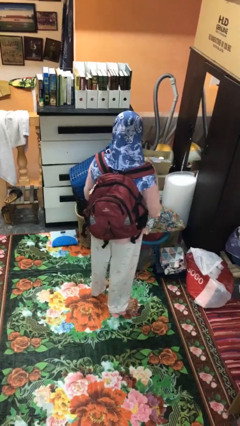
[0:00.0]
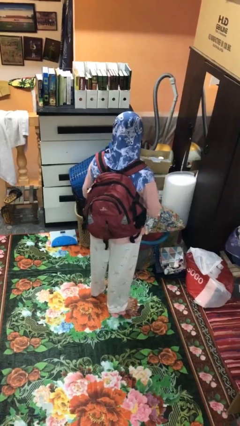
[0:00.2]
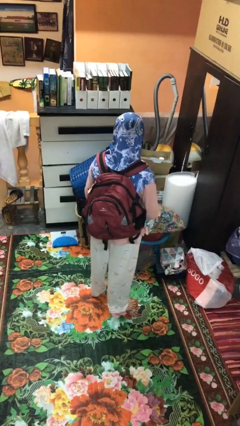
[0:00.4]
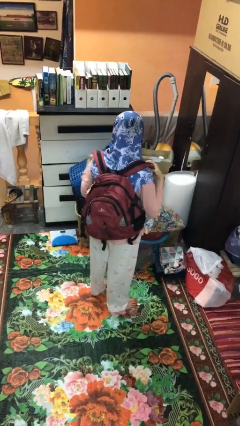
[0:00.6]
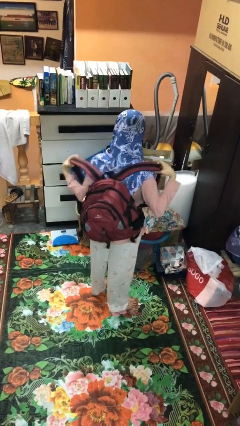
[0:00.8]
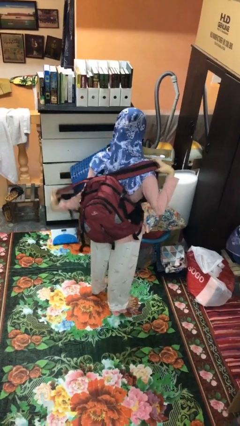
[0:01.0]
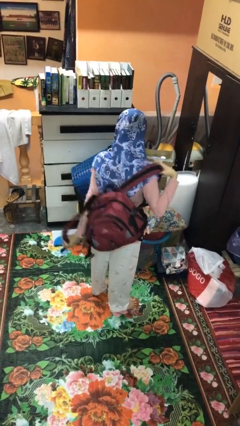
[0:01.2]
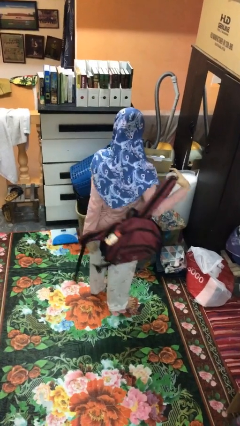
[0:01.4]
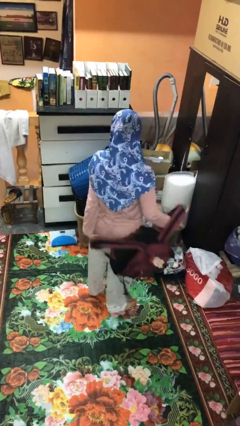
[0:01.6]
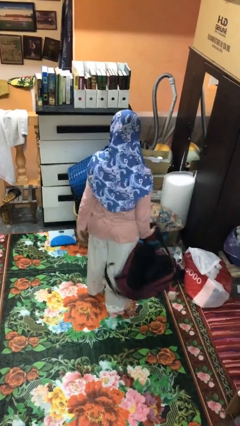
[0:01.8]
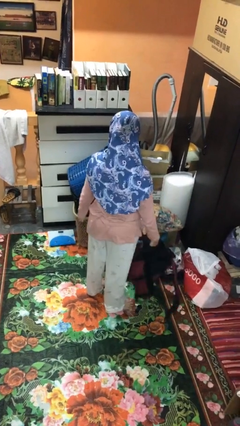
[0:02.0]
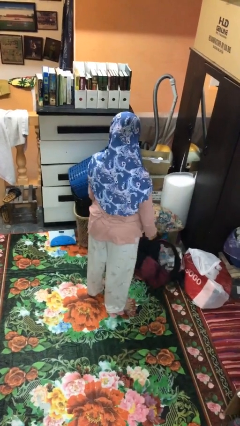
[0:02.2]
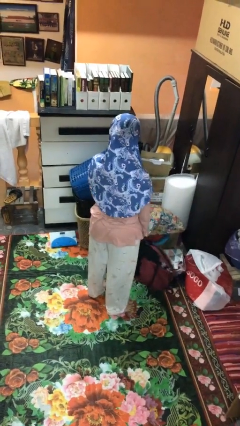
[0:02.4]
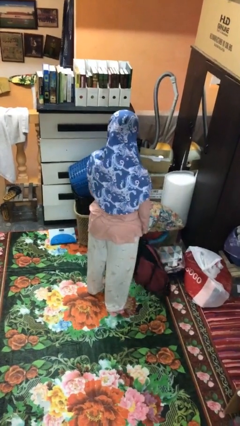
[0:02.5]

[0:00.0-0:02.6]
person takes off backpack

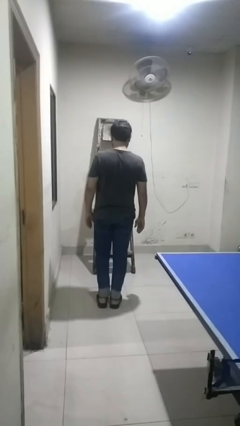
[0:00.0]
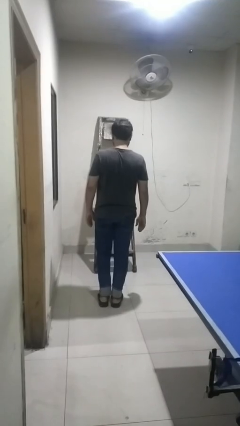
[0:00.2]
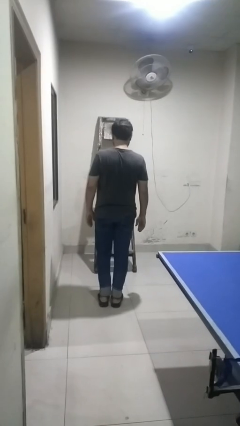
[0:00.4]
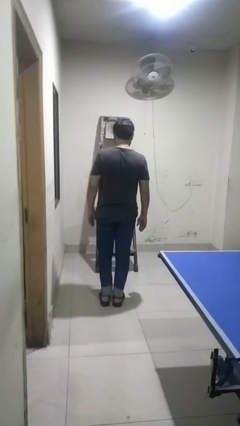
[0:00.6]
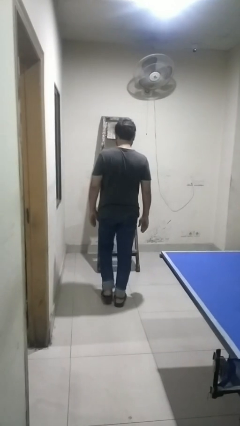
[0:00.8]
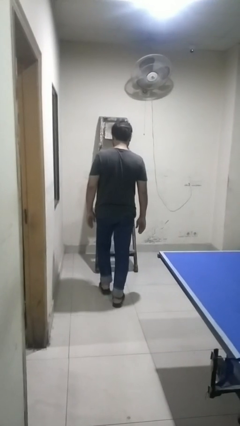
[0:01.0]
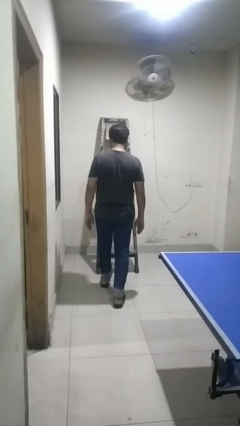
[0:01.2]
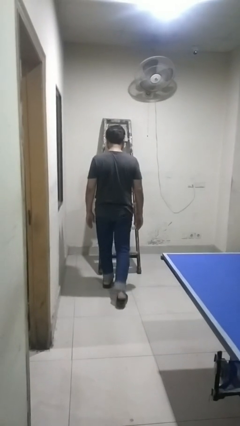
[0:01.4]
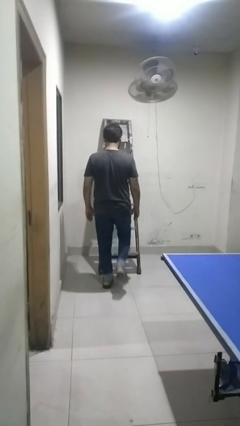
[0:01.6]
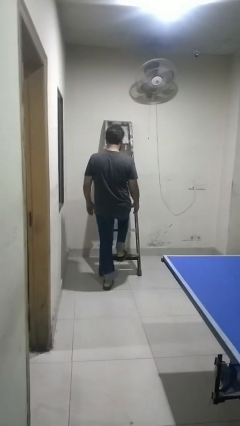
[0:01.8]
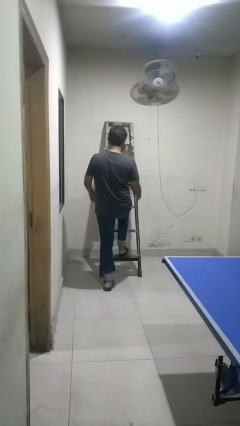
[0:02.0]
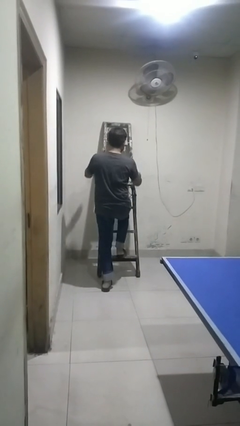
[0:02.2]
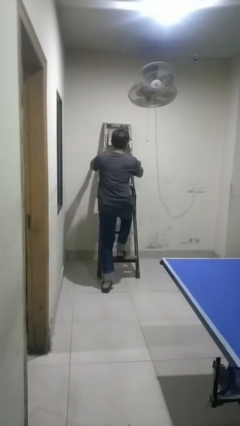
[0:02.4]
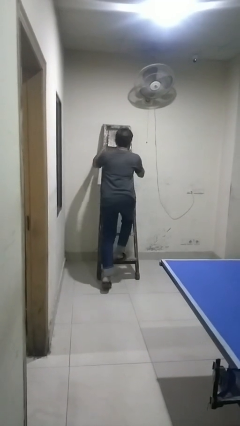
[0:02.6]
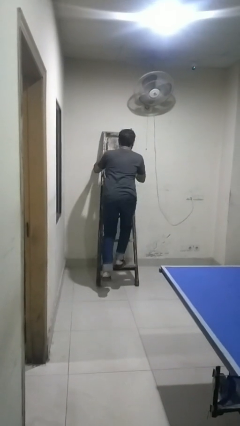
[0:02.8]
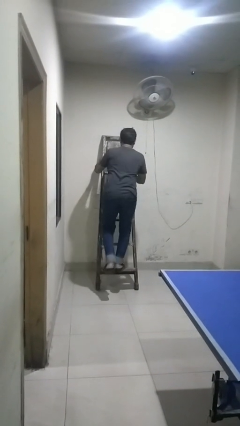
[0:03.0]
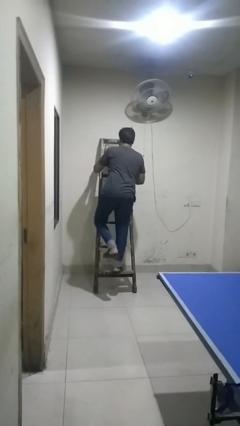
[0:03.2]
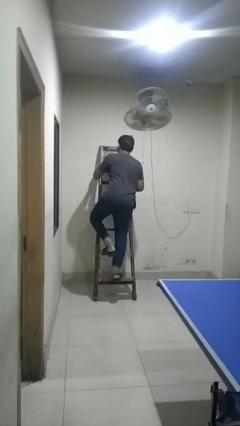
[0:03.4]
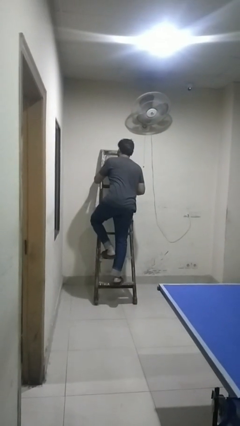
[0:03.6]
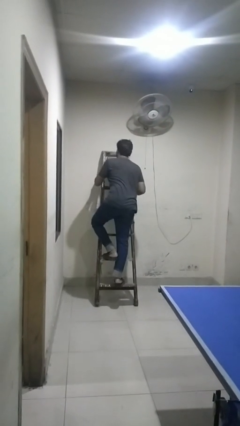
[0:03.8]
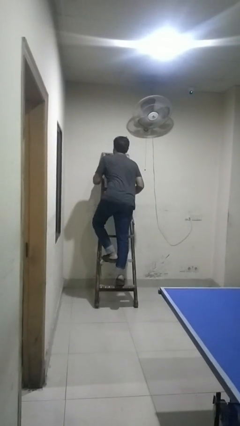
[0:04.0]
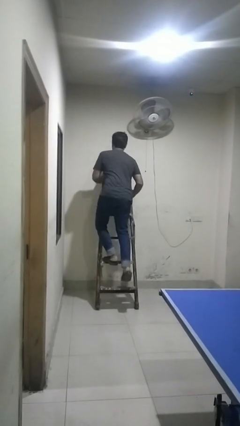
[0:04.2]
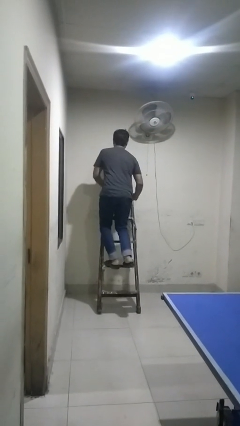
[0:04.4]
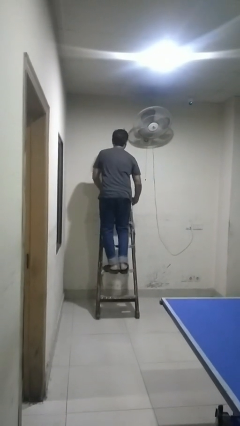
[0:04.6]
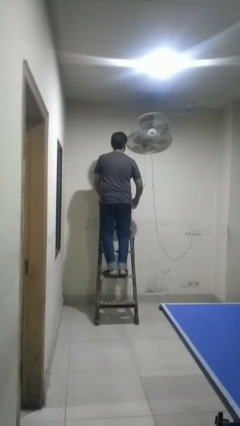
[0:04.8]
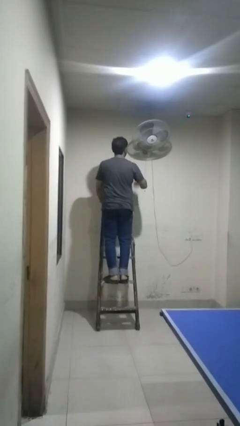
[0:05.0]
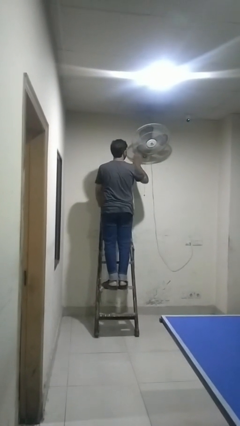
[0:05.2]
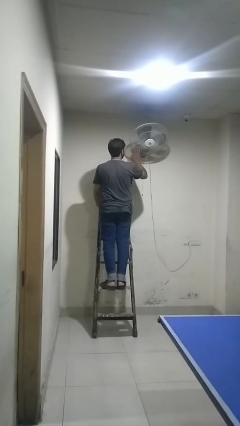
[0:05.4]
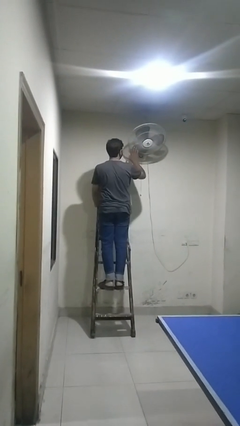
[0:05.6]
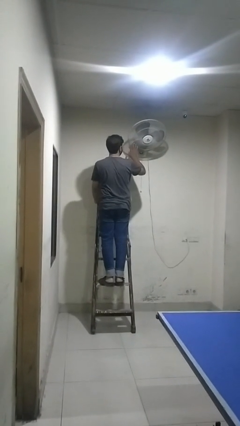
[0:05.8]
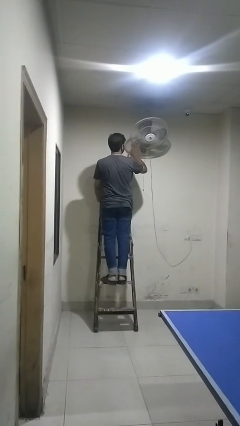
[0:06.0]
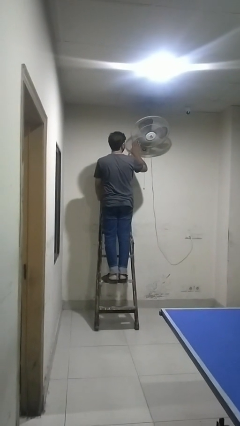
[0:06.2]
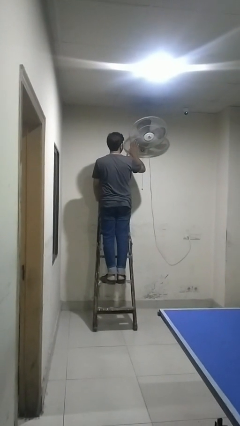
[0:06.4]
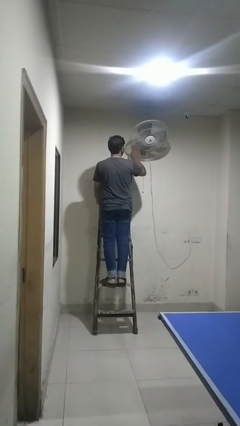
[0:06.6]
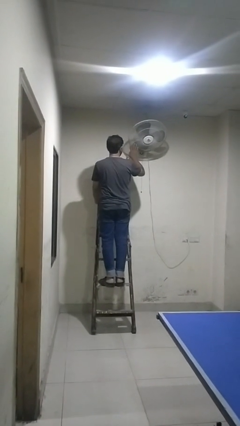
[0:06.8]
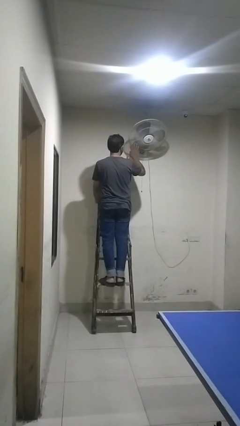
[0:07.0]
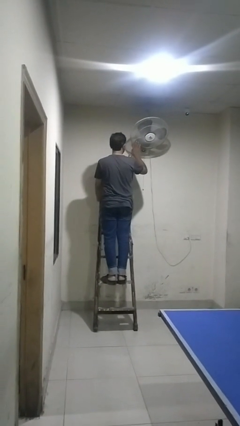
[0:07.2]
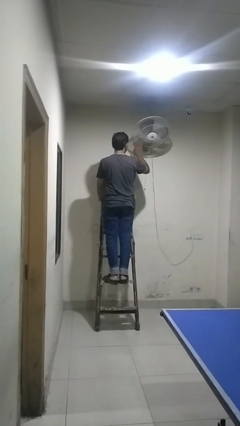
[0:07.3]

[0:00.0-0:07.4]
person climbs up ladder

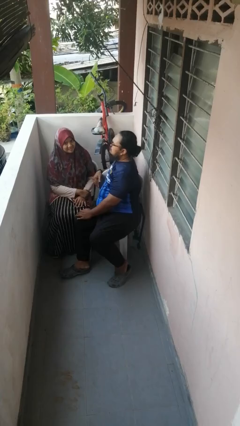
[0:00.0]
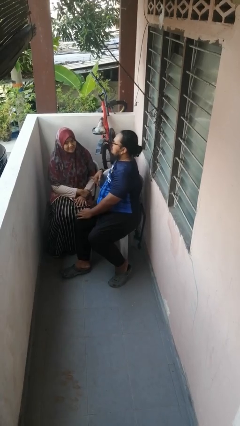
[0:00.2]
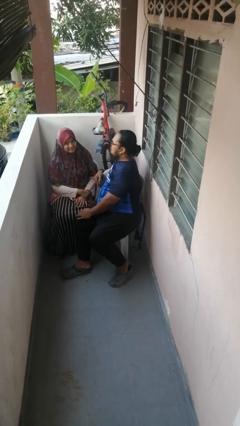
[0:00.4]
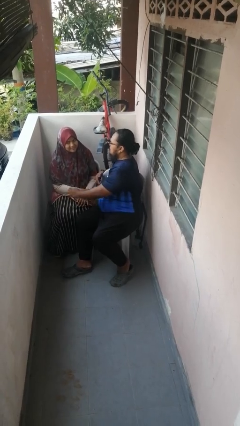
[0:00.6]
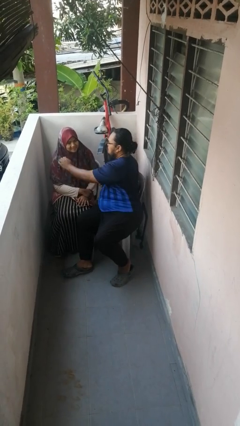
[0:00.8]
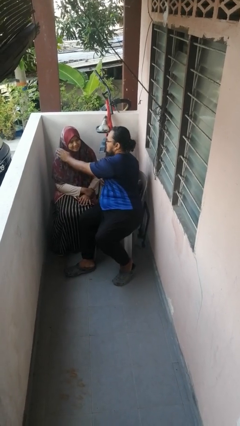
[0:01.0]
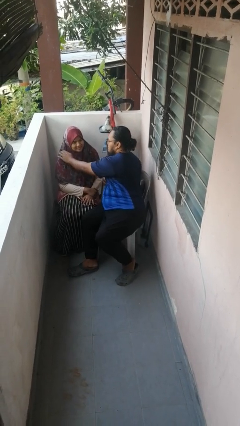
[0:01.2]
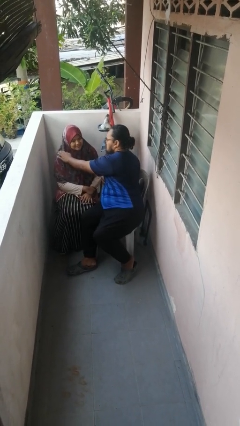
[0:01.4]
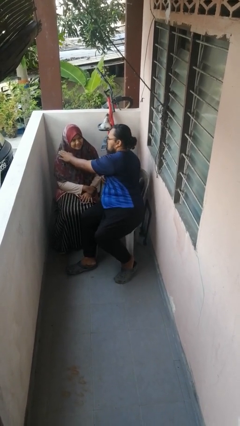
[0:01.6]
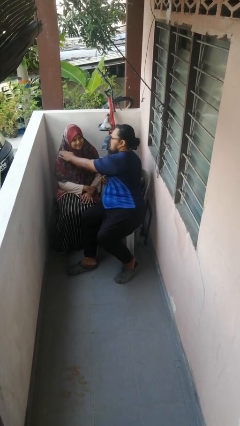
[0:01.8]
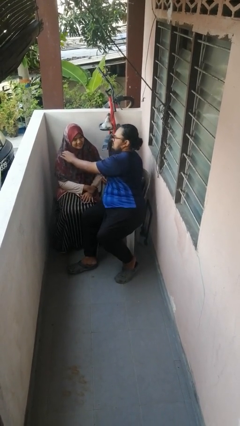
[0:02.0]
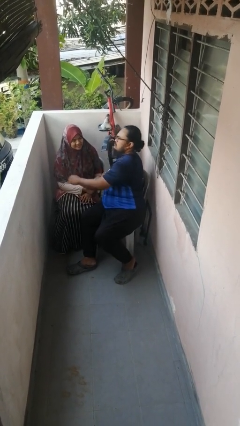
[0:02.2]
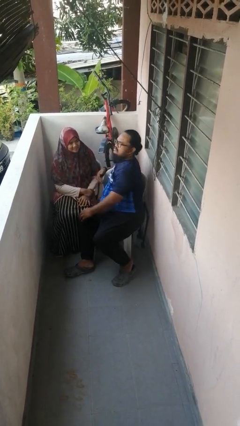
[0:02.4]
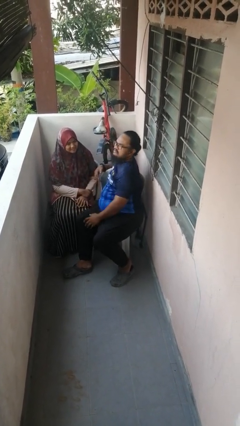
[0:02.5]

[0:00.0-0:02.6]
person pounds shoulders of person

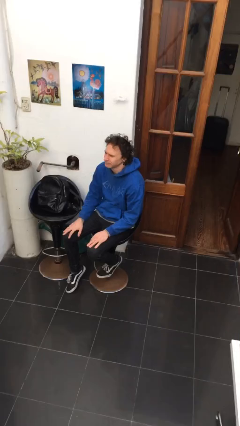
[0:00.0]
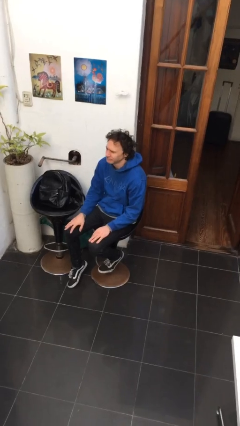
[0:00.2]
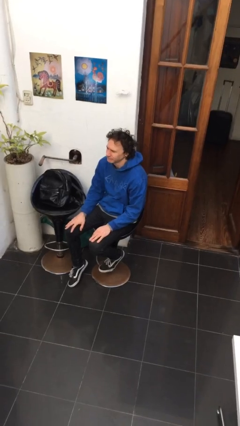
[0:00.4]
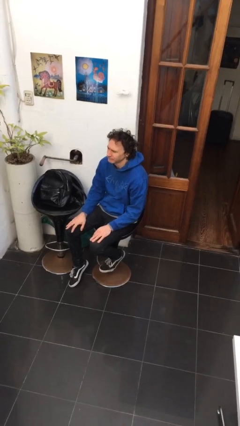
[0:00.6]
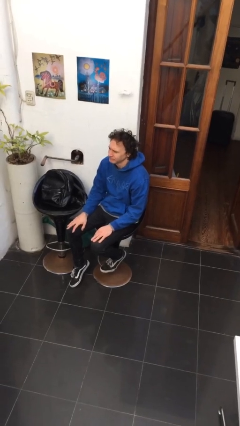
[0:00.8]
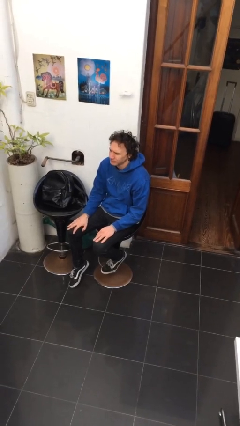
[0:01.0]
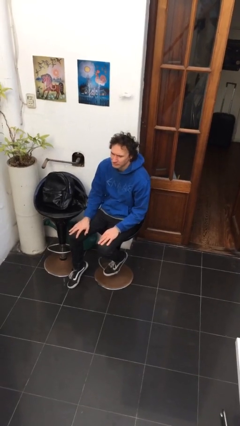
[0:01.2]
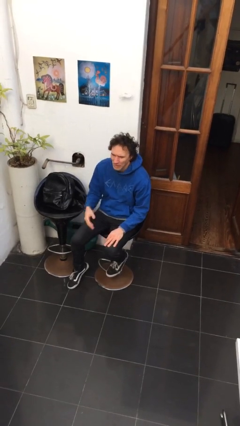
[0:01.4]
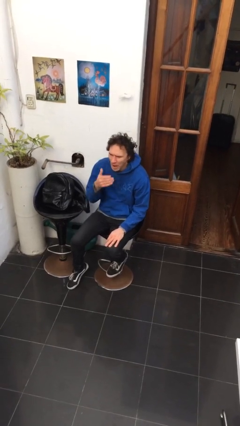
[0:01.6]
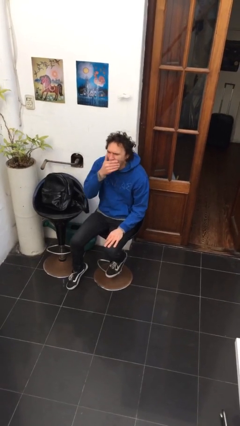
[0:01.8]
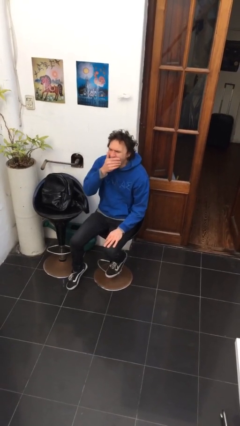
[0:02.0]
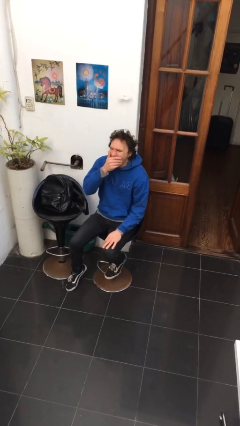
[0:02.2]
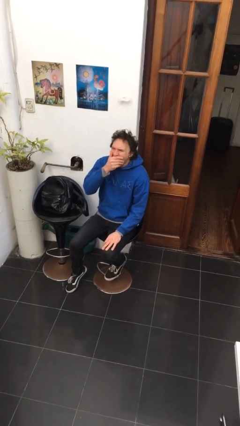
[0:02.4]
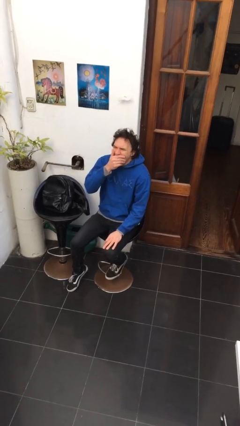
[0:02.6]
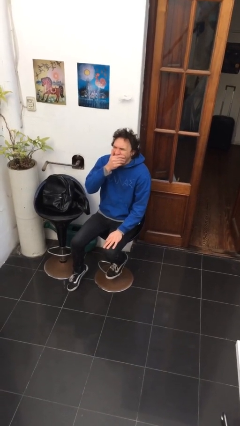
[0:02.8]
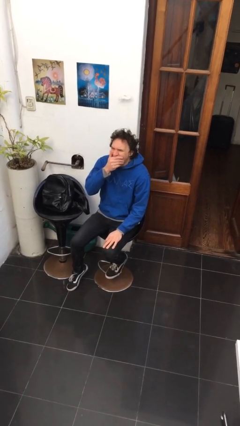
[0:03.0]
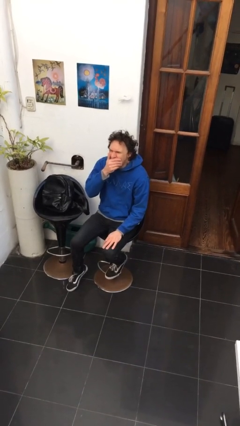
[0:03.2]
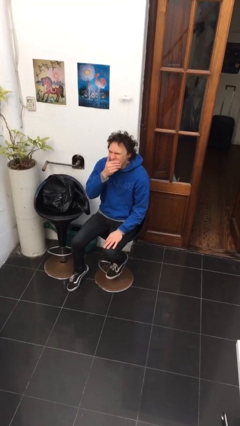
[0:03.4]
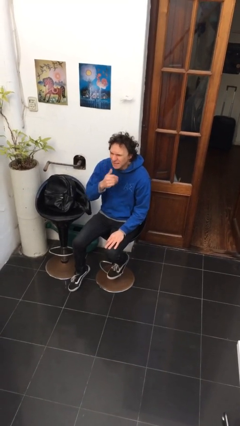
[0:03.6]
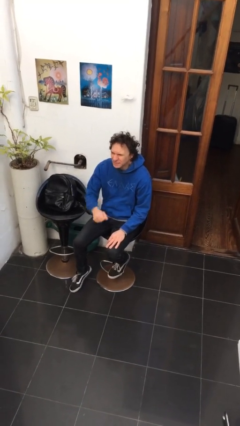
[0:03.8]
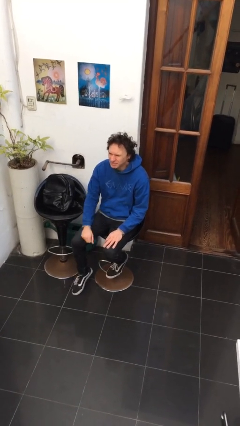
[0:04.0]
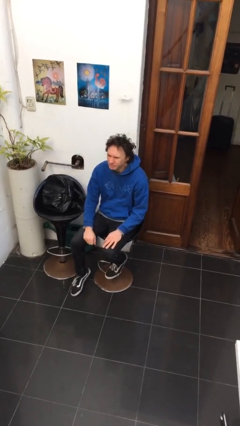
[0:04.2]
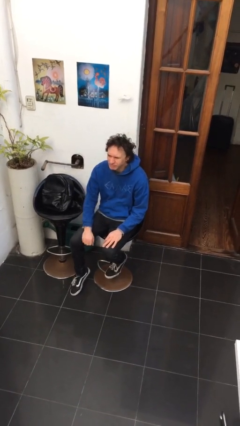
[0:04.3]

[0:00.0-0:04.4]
person yawns

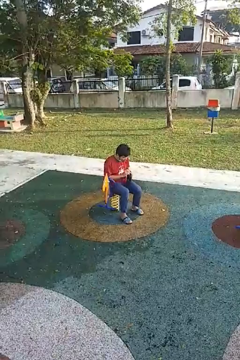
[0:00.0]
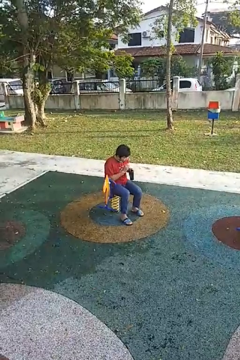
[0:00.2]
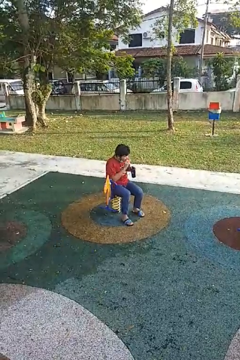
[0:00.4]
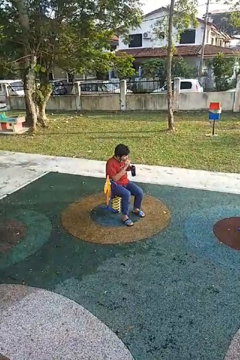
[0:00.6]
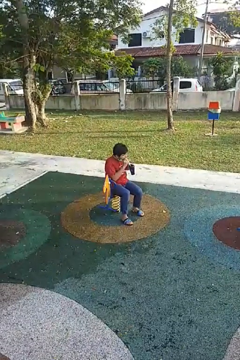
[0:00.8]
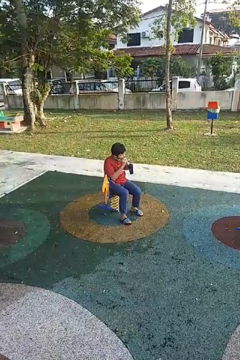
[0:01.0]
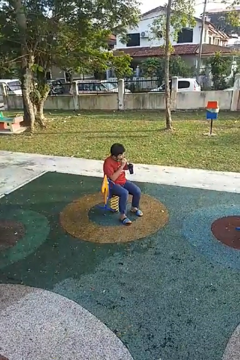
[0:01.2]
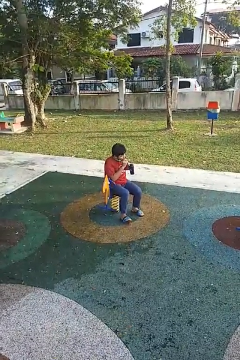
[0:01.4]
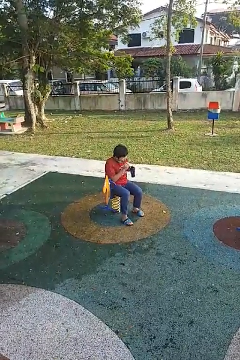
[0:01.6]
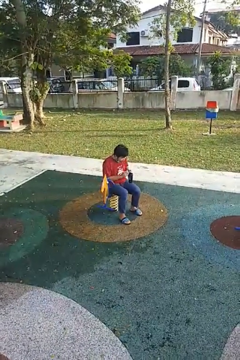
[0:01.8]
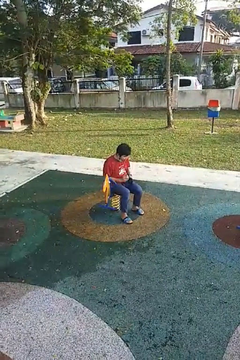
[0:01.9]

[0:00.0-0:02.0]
person drinks from straw
